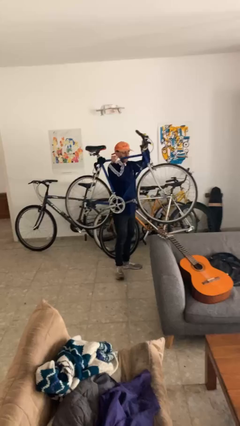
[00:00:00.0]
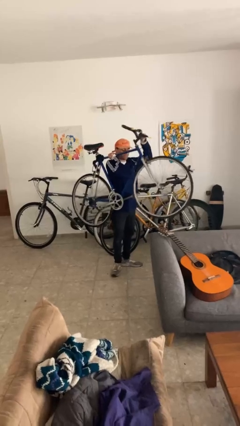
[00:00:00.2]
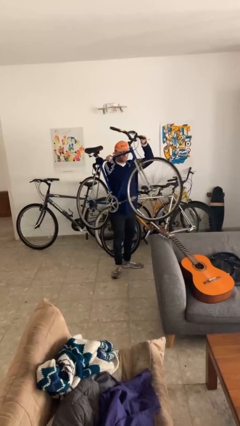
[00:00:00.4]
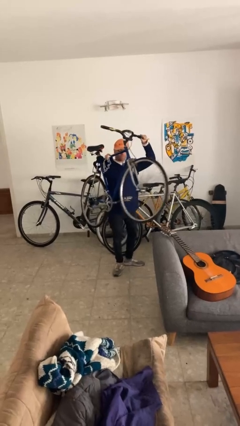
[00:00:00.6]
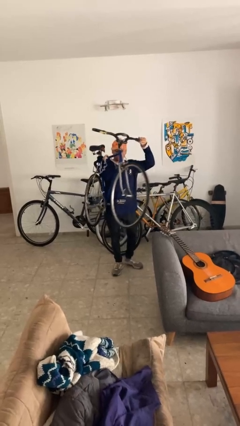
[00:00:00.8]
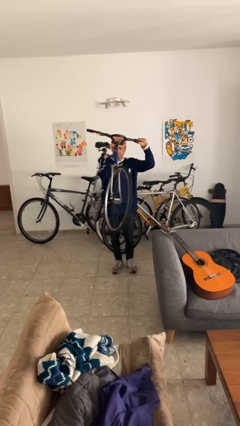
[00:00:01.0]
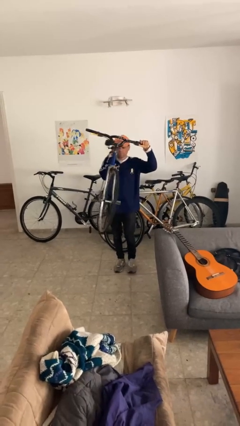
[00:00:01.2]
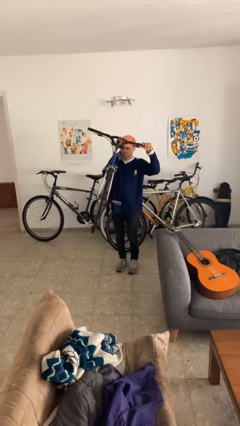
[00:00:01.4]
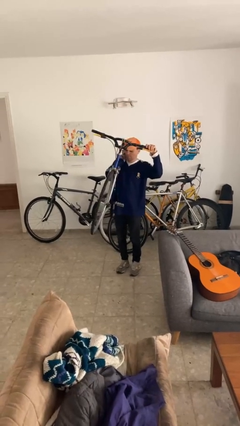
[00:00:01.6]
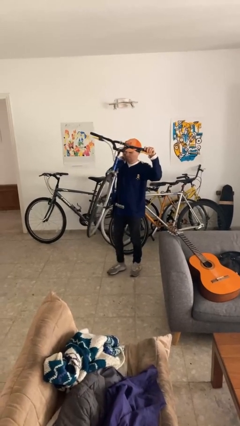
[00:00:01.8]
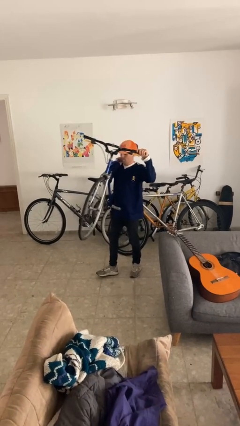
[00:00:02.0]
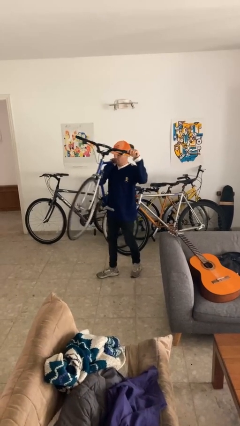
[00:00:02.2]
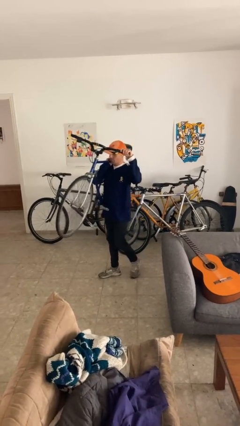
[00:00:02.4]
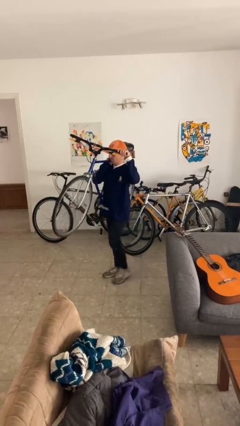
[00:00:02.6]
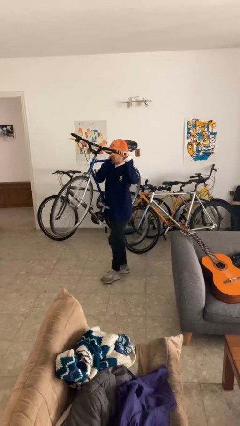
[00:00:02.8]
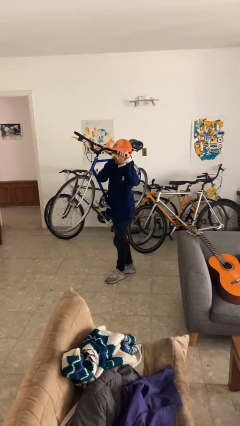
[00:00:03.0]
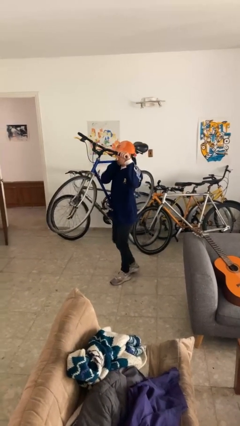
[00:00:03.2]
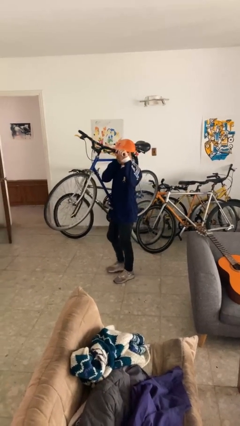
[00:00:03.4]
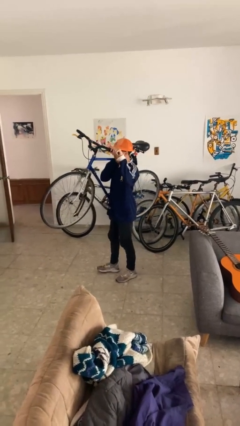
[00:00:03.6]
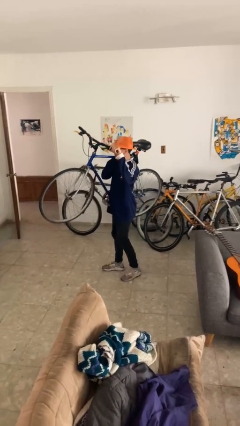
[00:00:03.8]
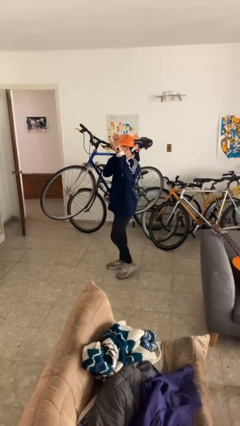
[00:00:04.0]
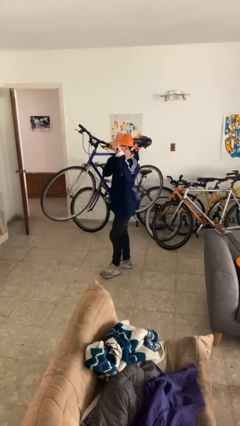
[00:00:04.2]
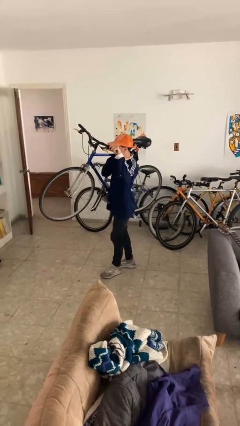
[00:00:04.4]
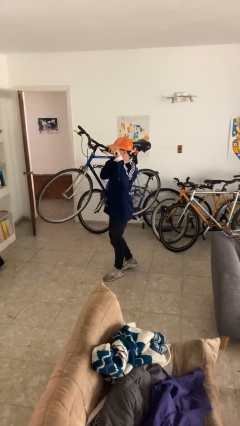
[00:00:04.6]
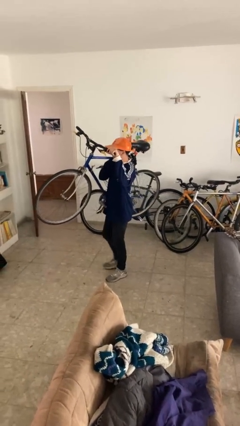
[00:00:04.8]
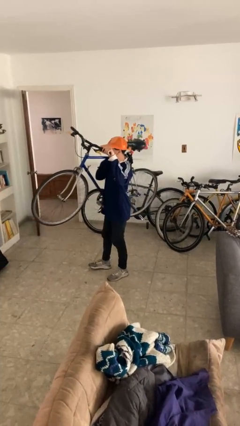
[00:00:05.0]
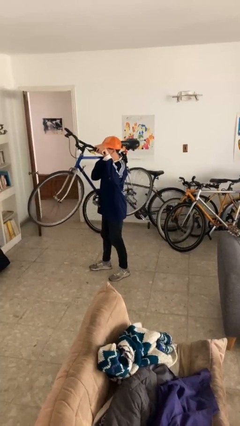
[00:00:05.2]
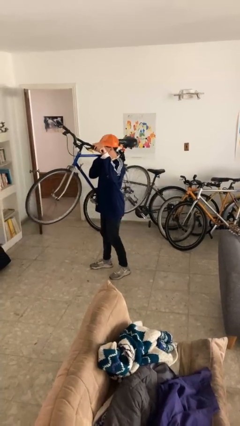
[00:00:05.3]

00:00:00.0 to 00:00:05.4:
person carries bicycle

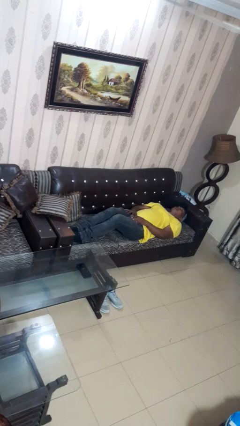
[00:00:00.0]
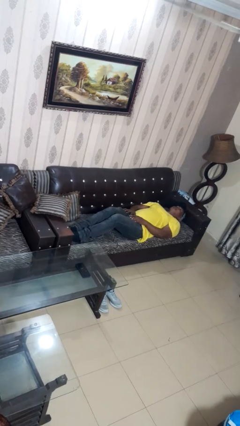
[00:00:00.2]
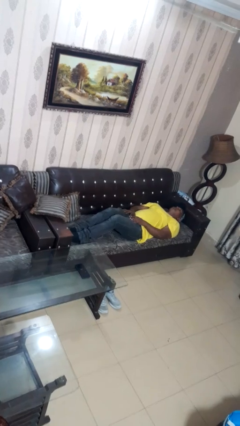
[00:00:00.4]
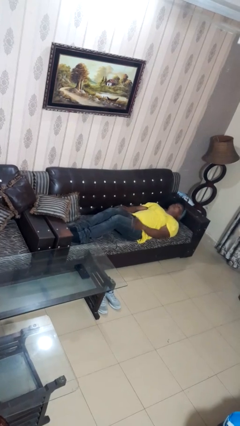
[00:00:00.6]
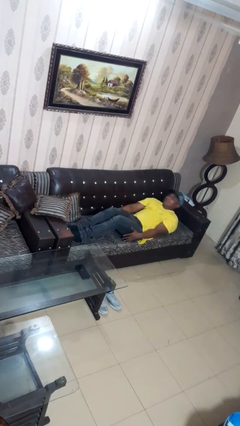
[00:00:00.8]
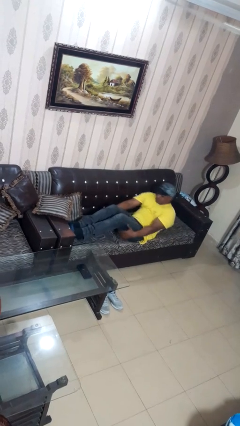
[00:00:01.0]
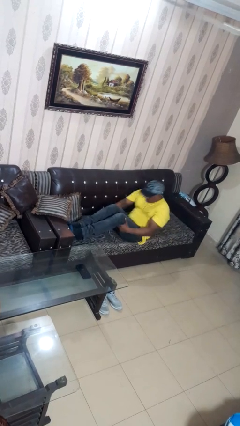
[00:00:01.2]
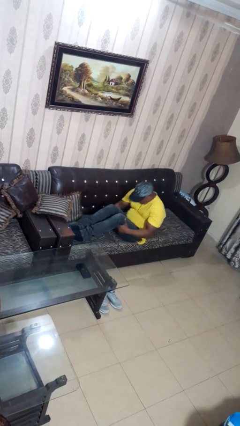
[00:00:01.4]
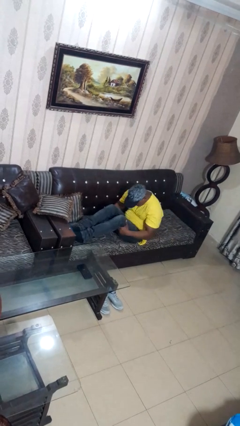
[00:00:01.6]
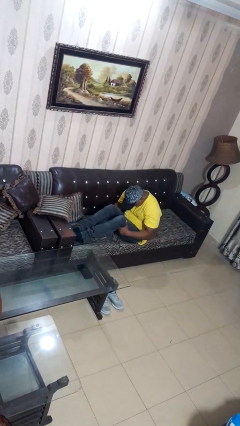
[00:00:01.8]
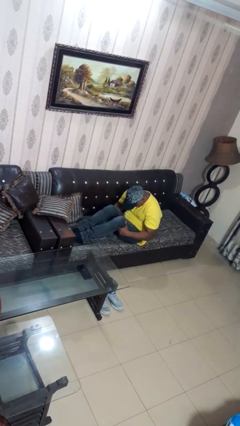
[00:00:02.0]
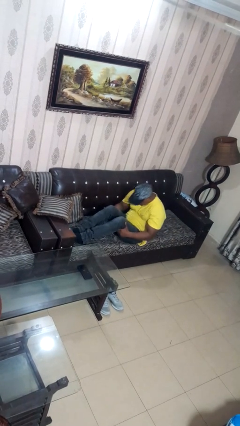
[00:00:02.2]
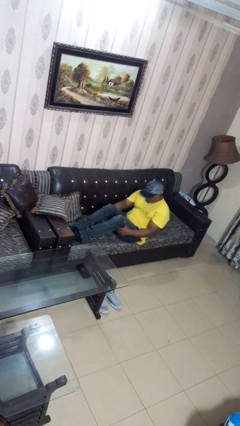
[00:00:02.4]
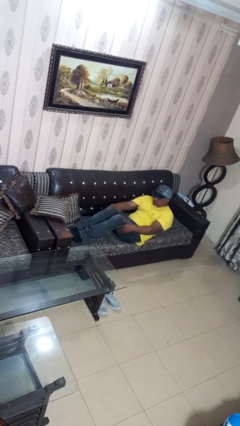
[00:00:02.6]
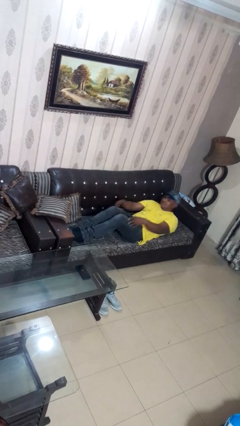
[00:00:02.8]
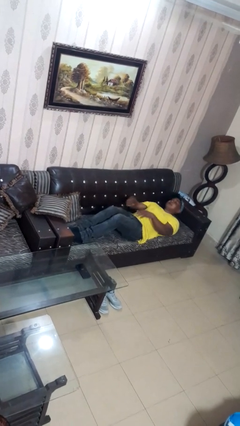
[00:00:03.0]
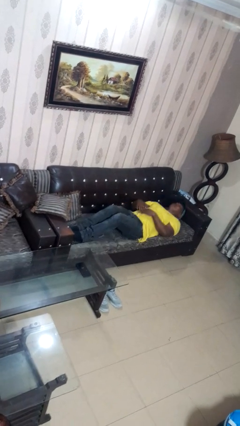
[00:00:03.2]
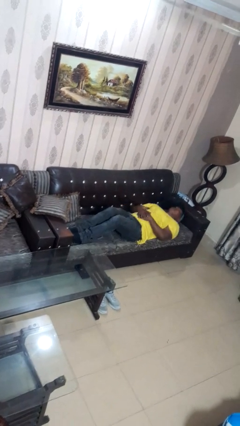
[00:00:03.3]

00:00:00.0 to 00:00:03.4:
person exercises with situp

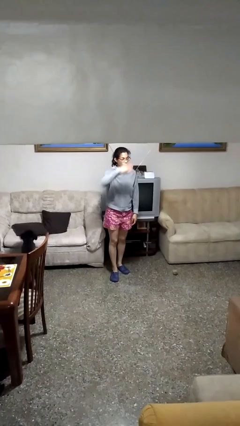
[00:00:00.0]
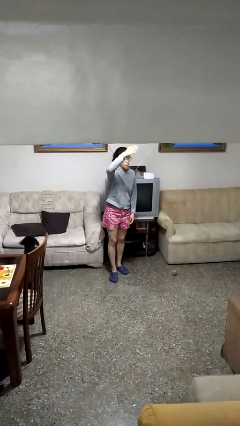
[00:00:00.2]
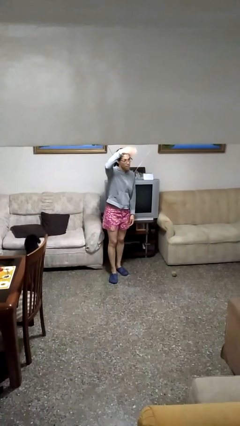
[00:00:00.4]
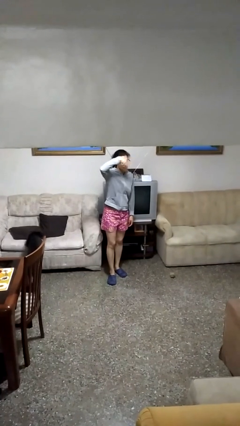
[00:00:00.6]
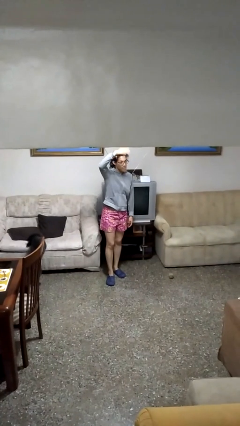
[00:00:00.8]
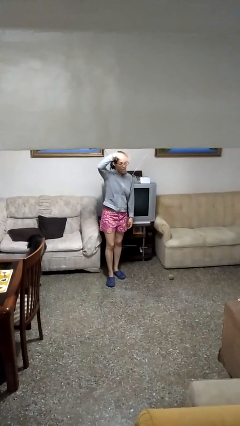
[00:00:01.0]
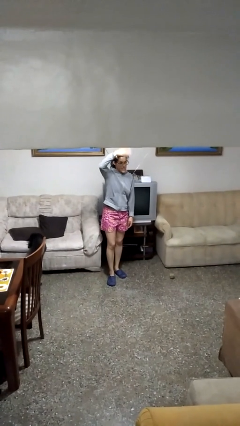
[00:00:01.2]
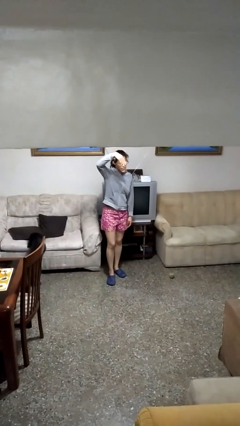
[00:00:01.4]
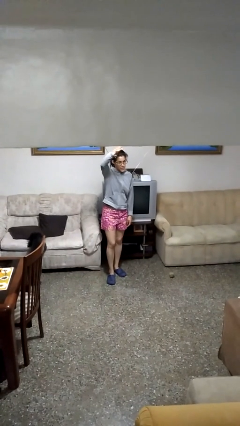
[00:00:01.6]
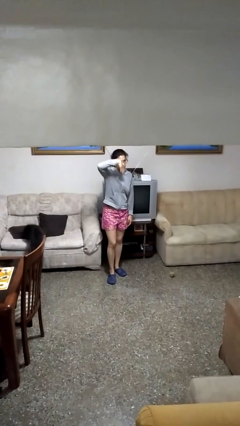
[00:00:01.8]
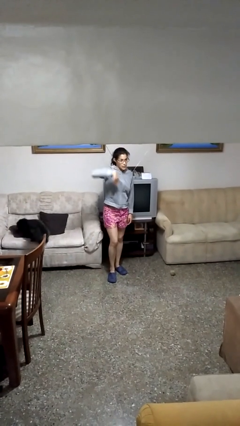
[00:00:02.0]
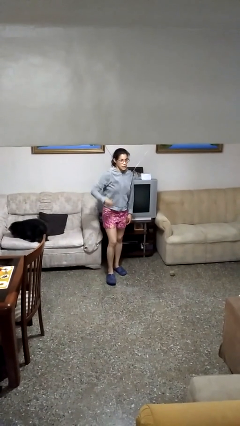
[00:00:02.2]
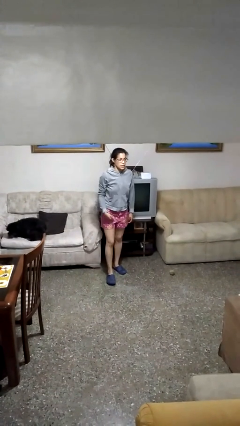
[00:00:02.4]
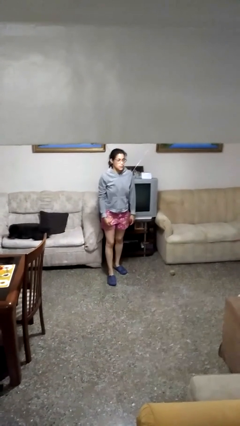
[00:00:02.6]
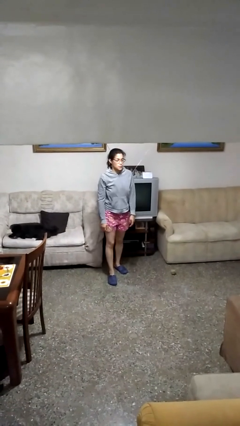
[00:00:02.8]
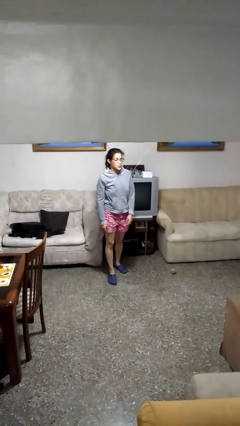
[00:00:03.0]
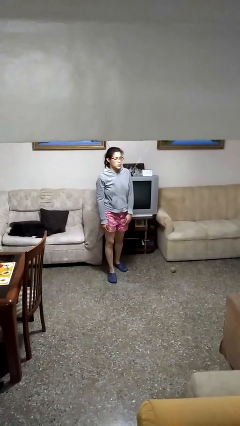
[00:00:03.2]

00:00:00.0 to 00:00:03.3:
person gestures come here

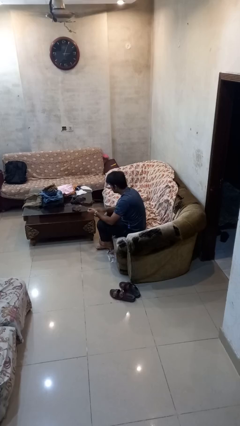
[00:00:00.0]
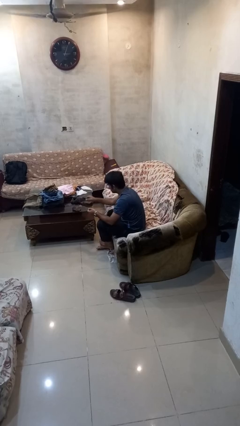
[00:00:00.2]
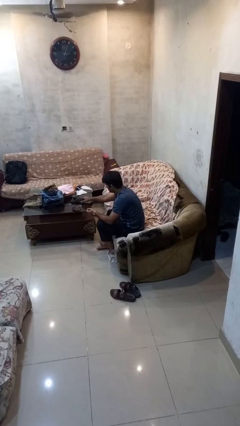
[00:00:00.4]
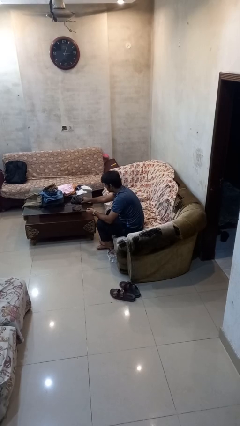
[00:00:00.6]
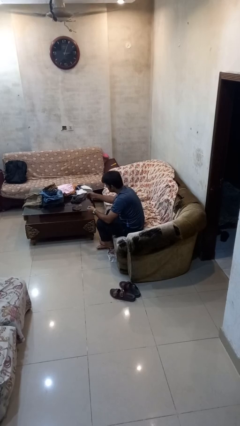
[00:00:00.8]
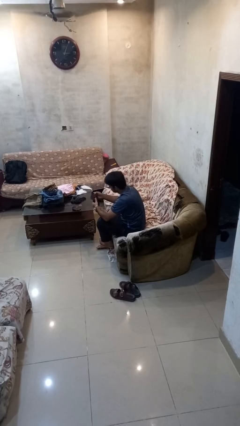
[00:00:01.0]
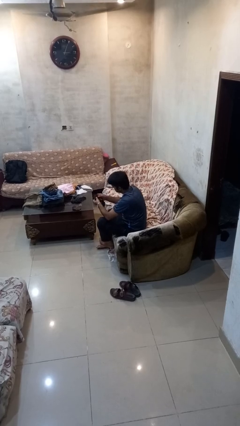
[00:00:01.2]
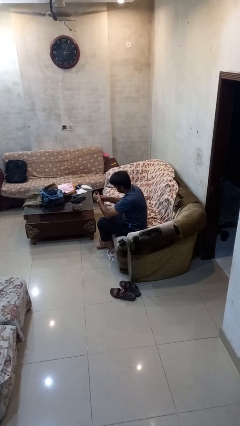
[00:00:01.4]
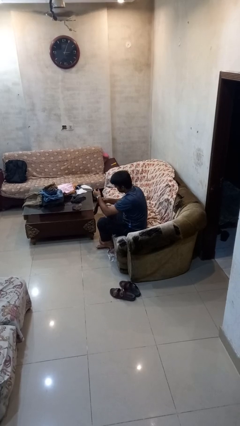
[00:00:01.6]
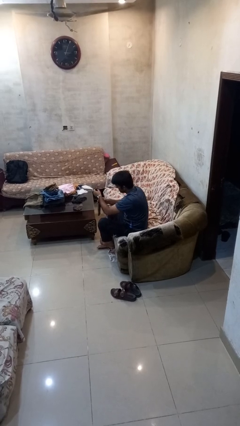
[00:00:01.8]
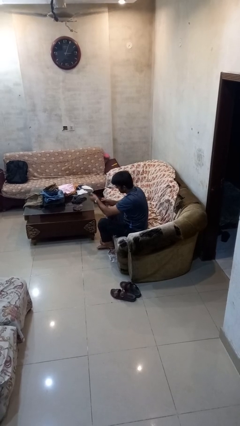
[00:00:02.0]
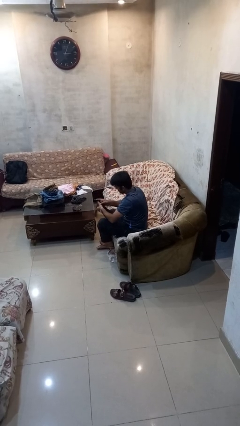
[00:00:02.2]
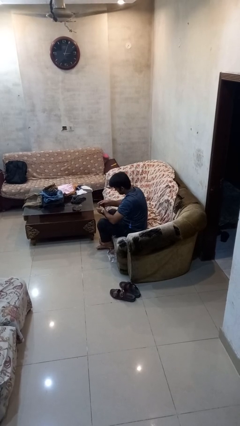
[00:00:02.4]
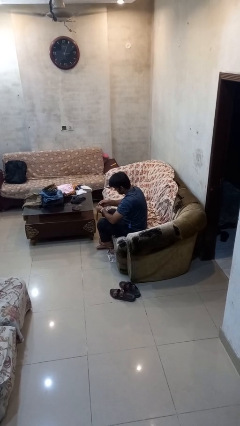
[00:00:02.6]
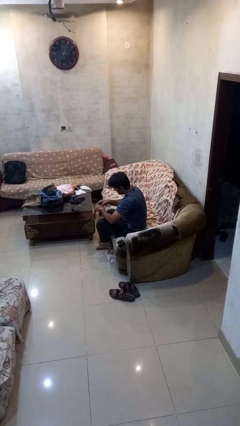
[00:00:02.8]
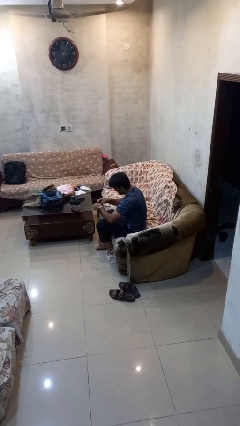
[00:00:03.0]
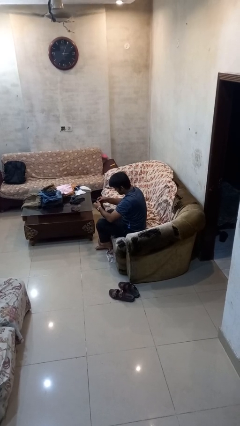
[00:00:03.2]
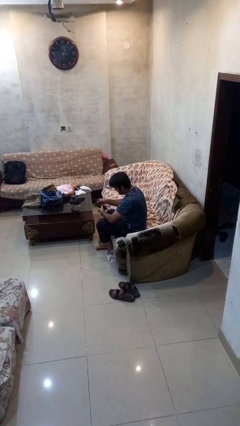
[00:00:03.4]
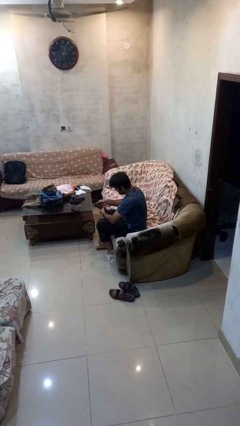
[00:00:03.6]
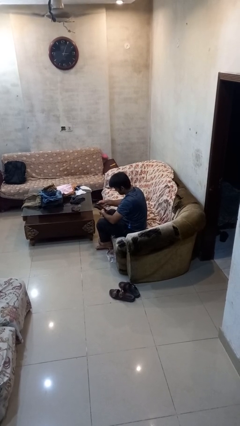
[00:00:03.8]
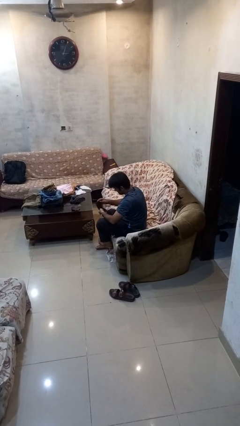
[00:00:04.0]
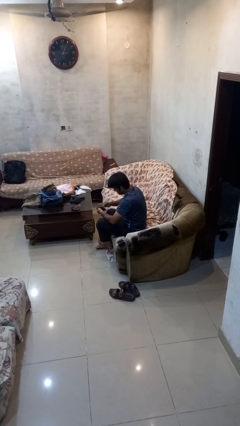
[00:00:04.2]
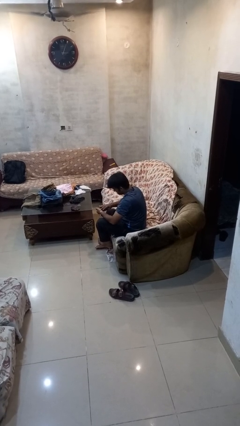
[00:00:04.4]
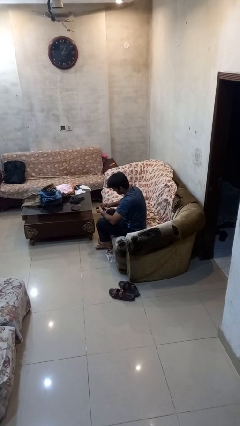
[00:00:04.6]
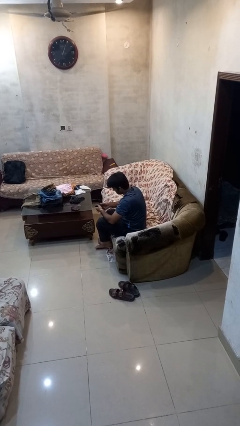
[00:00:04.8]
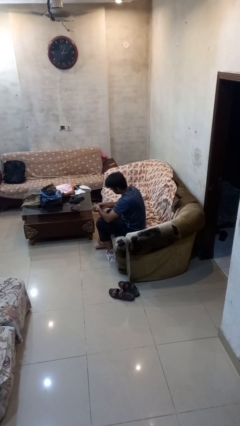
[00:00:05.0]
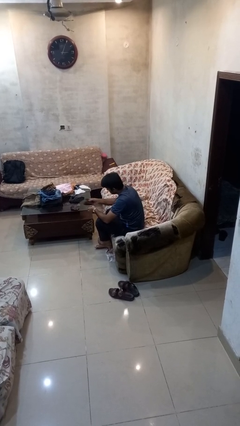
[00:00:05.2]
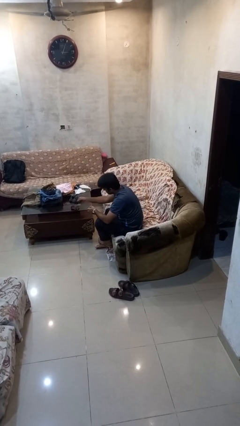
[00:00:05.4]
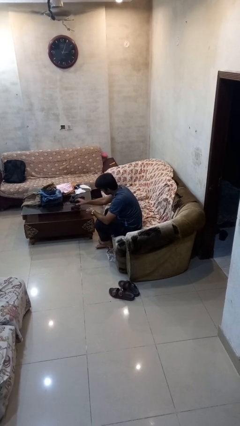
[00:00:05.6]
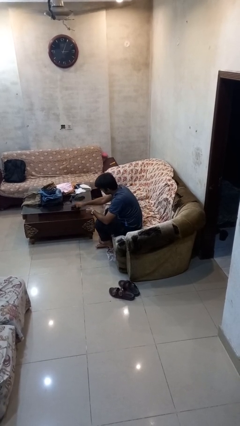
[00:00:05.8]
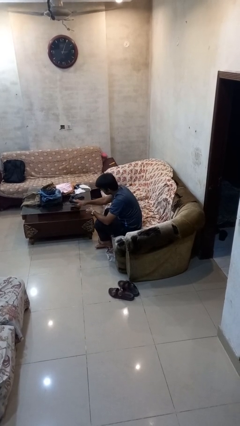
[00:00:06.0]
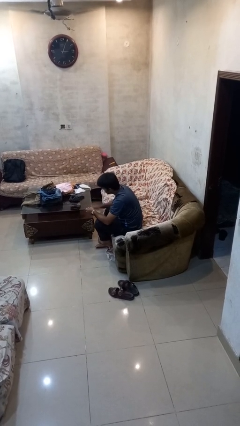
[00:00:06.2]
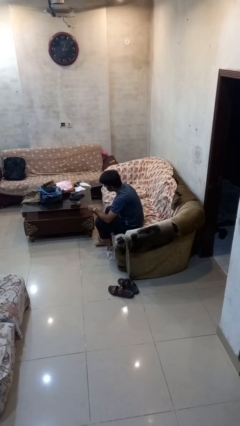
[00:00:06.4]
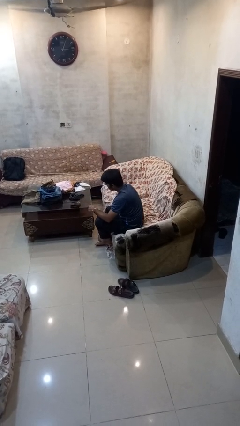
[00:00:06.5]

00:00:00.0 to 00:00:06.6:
person folds socks
